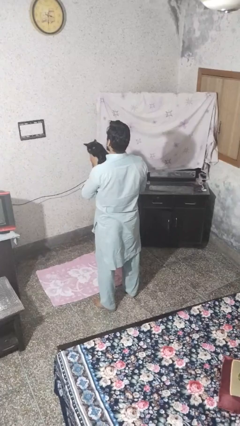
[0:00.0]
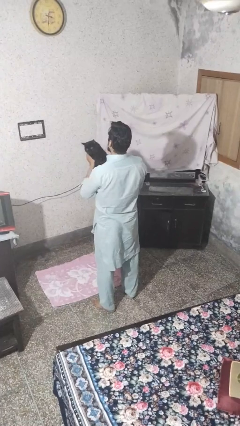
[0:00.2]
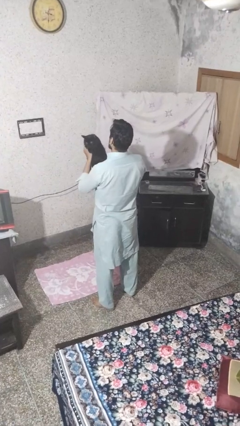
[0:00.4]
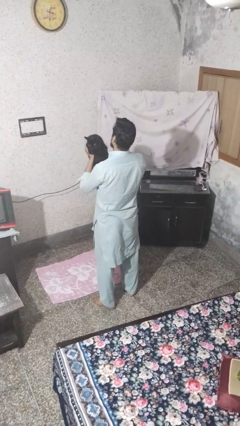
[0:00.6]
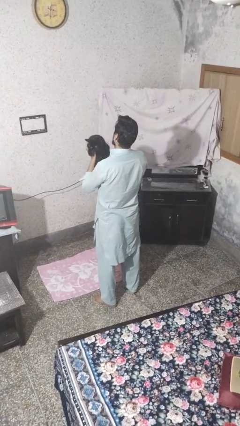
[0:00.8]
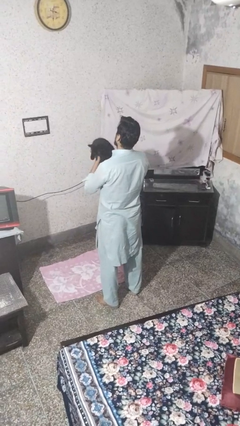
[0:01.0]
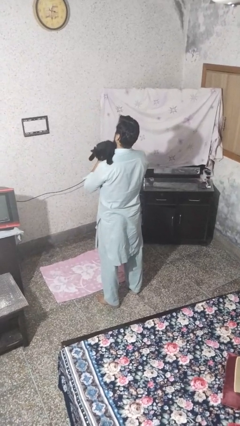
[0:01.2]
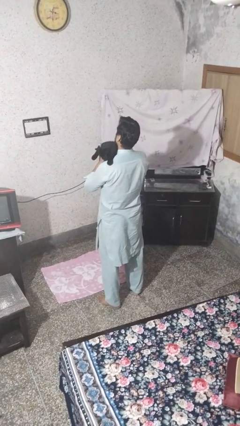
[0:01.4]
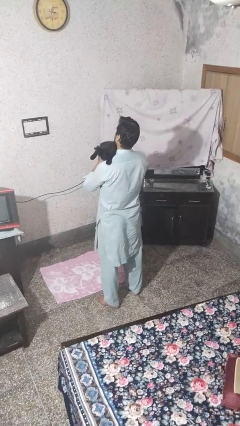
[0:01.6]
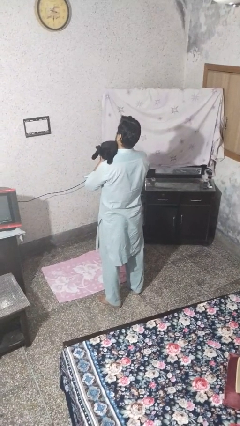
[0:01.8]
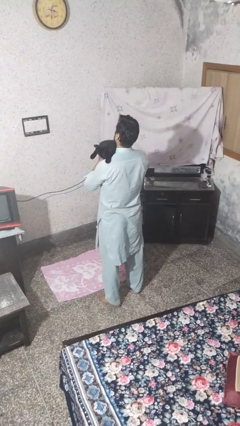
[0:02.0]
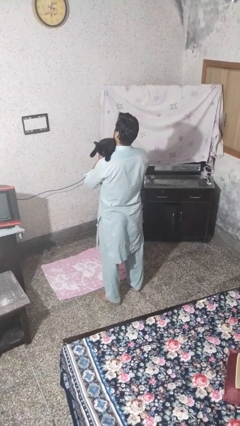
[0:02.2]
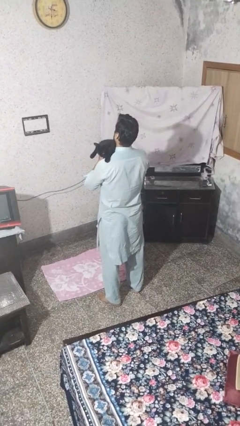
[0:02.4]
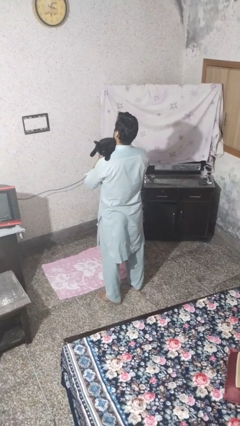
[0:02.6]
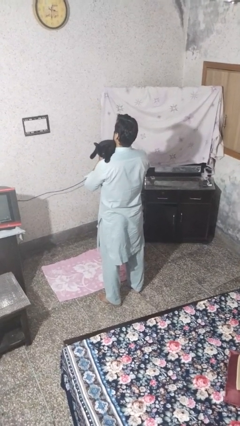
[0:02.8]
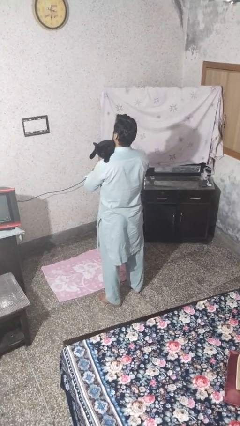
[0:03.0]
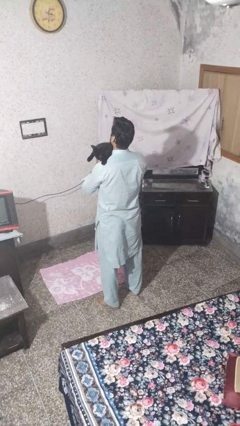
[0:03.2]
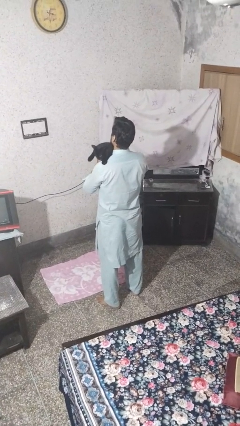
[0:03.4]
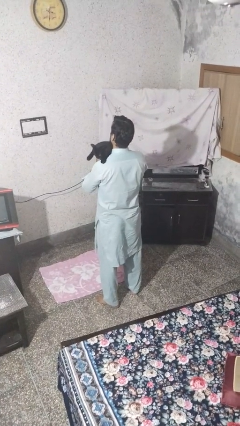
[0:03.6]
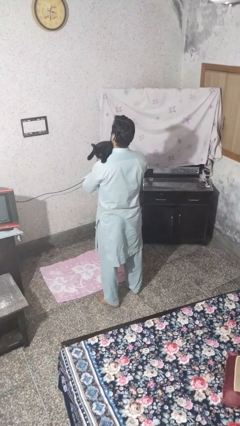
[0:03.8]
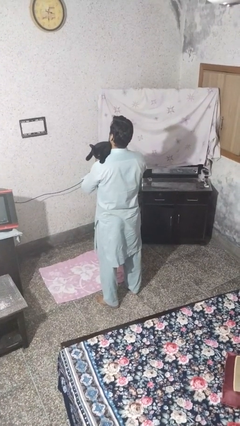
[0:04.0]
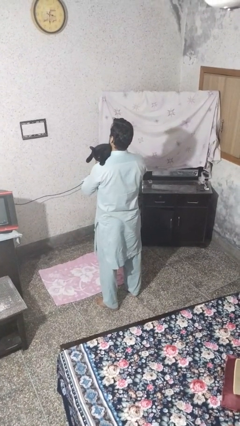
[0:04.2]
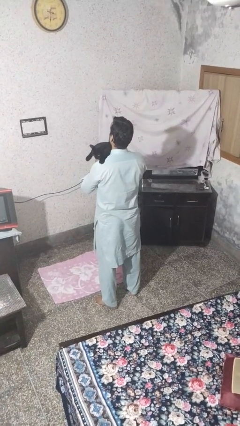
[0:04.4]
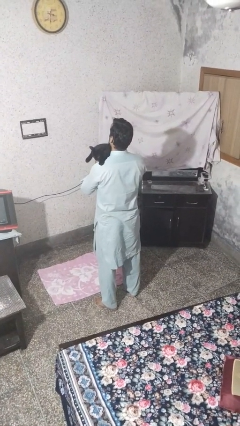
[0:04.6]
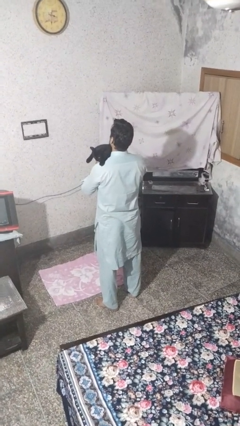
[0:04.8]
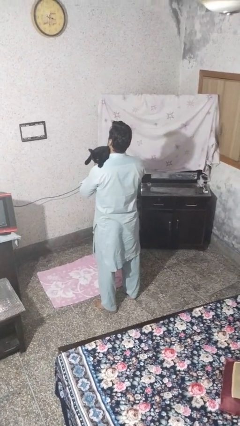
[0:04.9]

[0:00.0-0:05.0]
person hugs cat

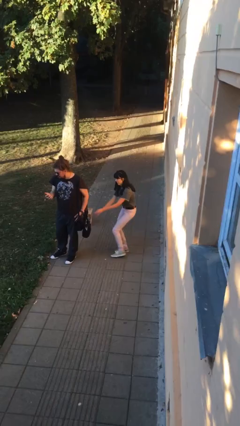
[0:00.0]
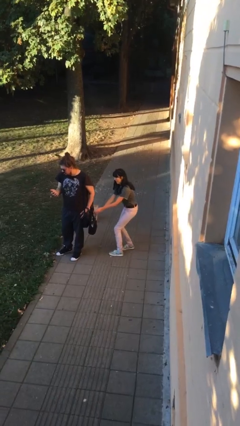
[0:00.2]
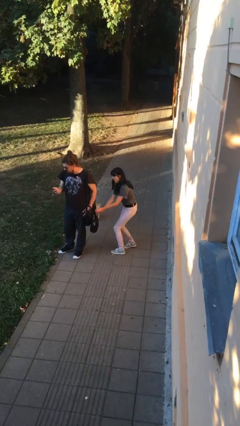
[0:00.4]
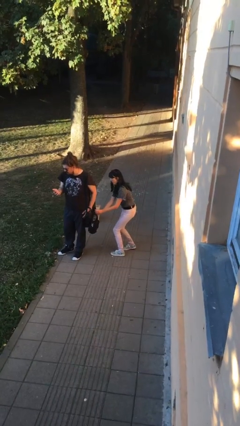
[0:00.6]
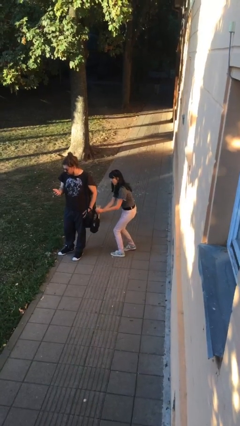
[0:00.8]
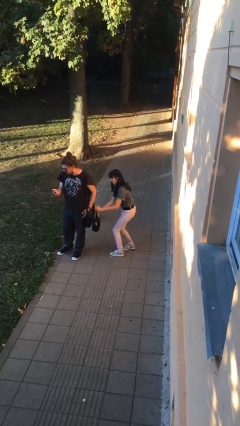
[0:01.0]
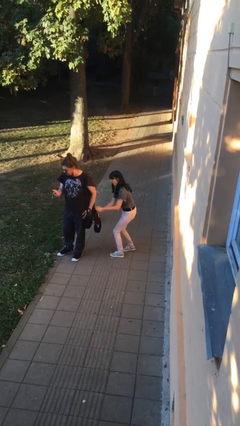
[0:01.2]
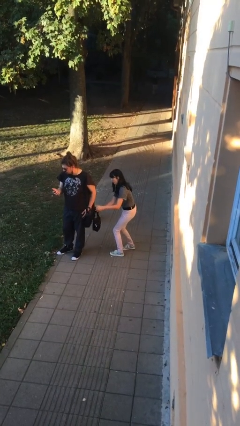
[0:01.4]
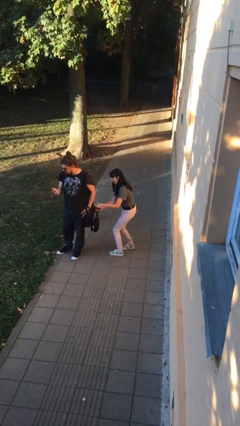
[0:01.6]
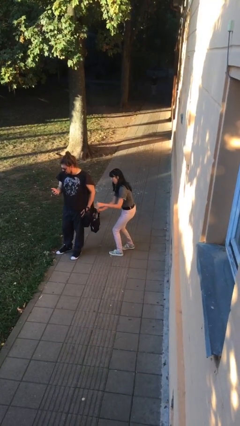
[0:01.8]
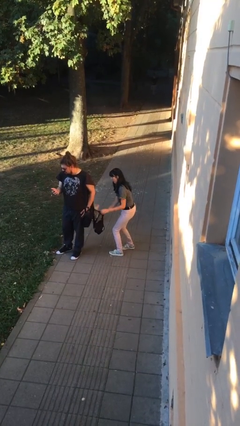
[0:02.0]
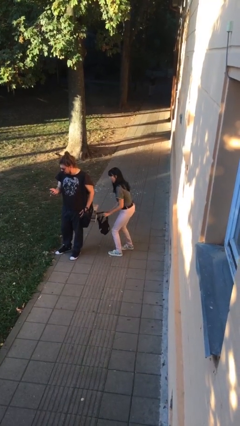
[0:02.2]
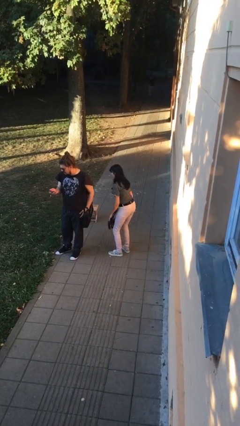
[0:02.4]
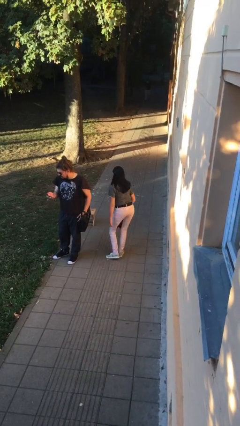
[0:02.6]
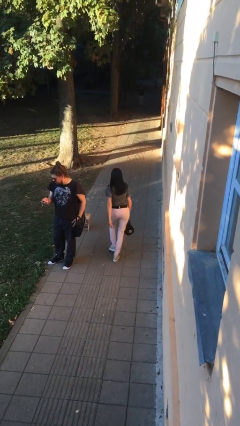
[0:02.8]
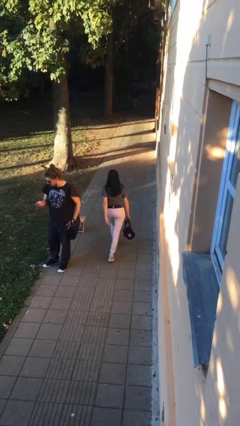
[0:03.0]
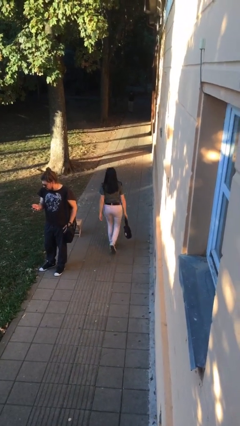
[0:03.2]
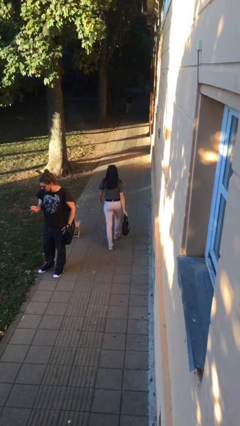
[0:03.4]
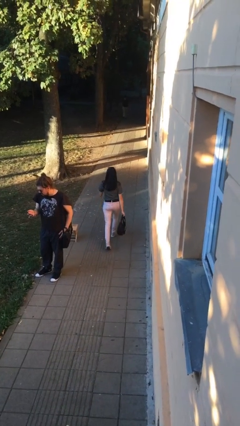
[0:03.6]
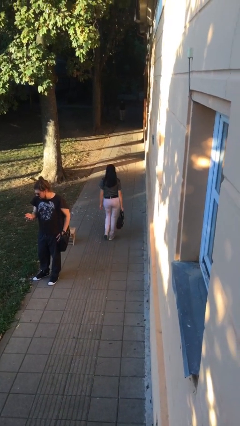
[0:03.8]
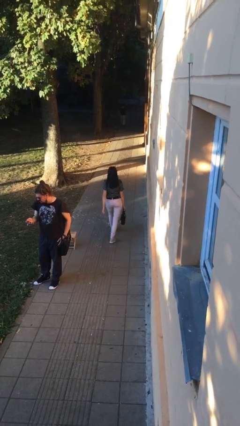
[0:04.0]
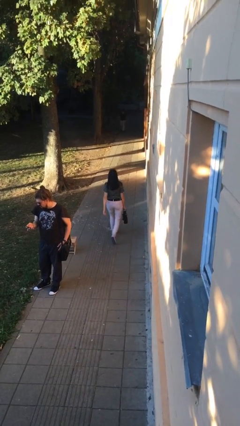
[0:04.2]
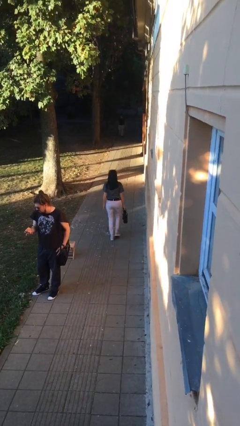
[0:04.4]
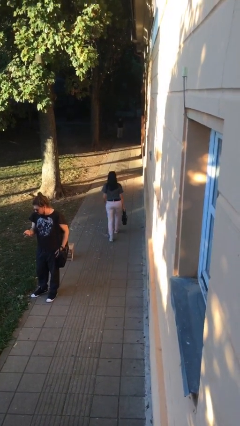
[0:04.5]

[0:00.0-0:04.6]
person steals object from person

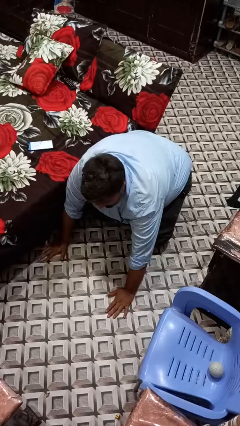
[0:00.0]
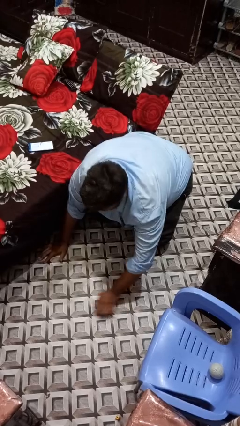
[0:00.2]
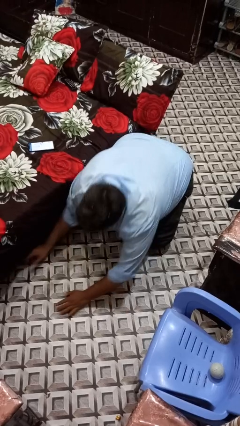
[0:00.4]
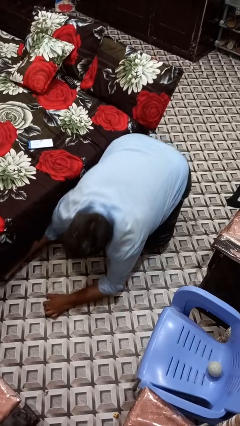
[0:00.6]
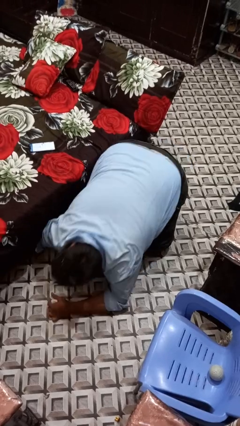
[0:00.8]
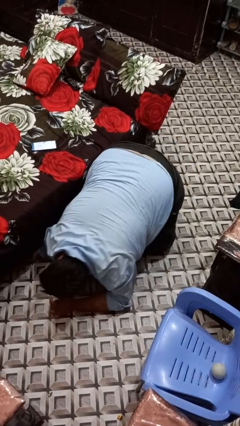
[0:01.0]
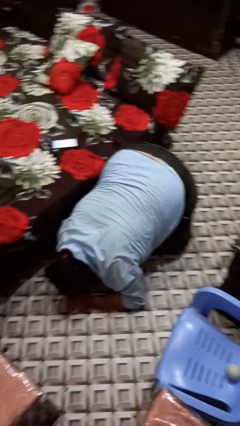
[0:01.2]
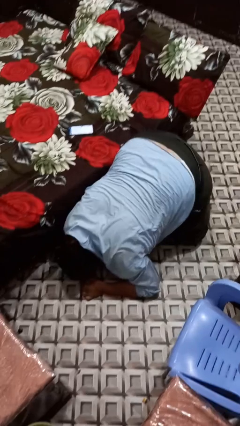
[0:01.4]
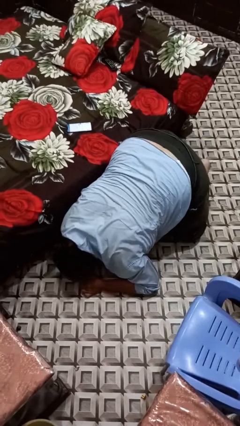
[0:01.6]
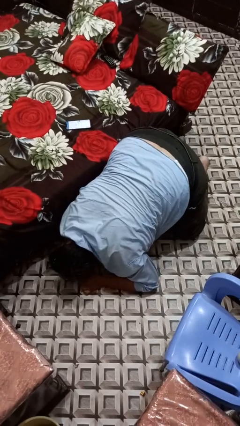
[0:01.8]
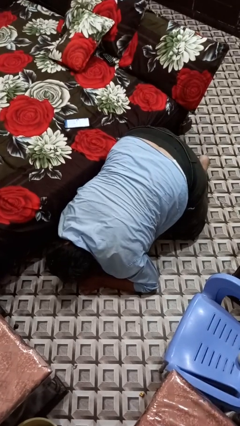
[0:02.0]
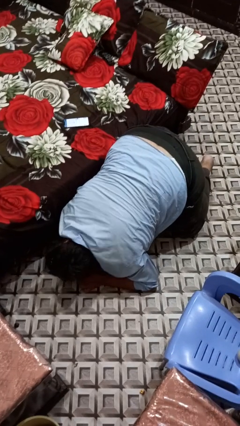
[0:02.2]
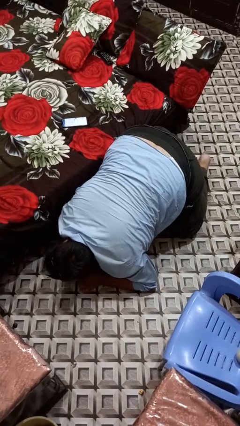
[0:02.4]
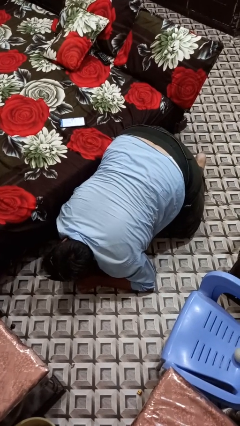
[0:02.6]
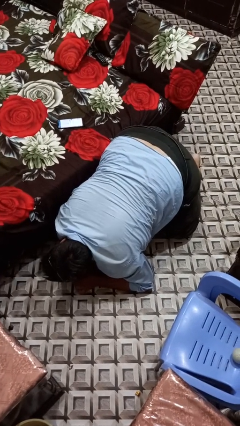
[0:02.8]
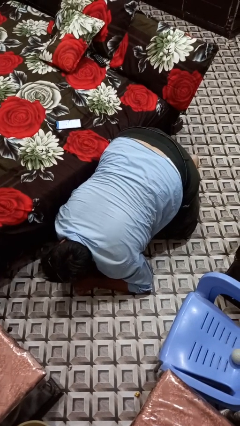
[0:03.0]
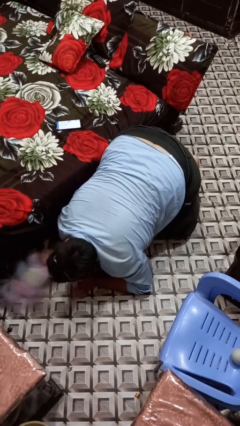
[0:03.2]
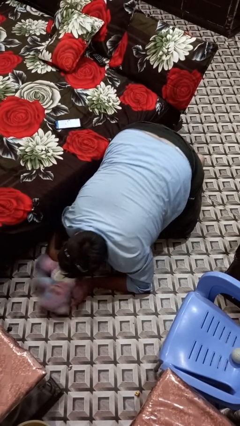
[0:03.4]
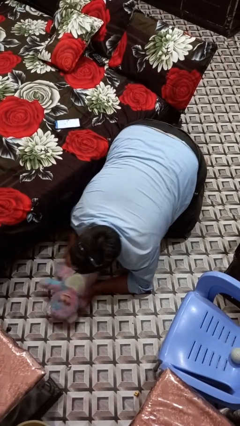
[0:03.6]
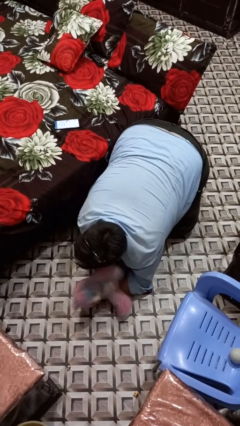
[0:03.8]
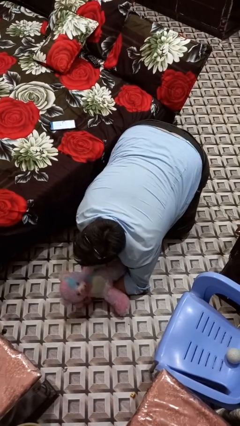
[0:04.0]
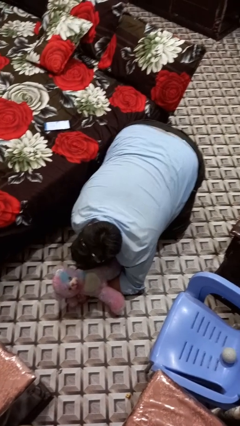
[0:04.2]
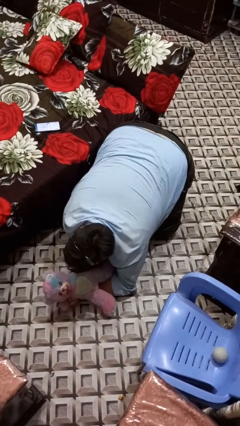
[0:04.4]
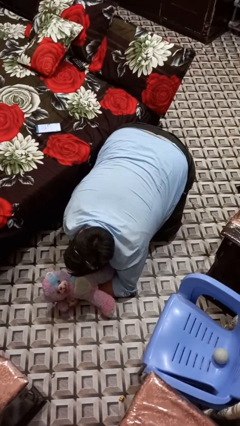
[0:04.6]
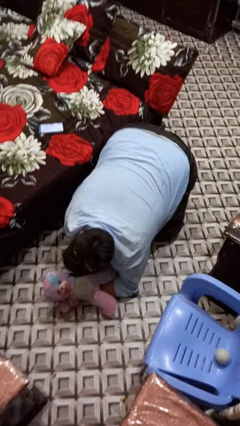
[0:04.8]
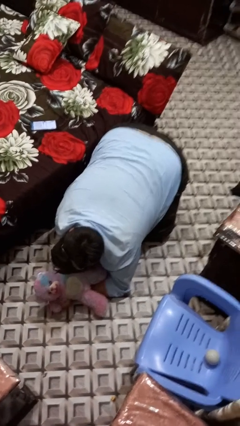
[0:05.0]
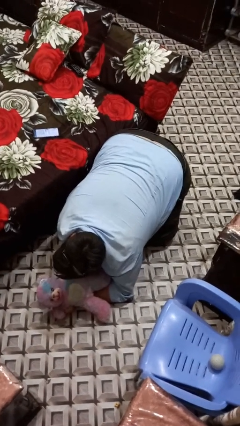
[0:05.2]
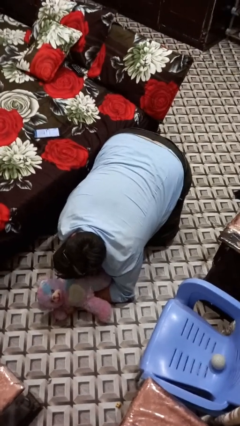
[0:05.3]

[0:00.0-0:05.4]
person searches under bed

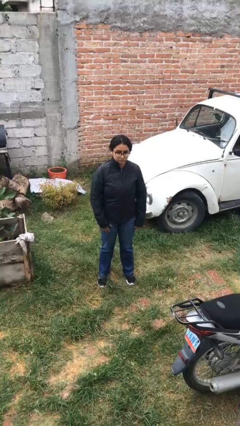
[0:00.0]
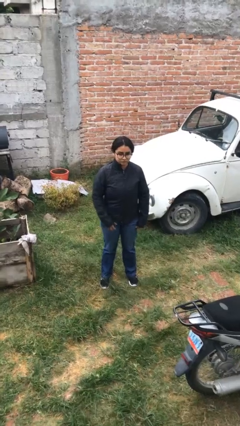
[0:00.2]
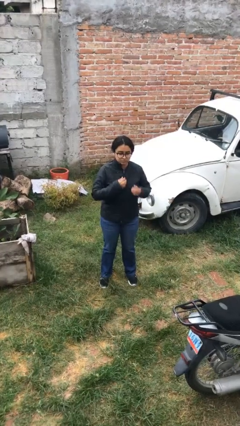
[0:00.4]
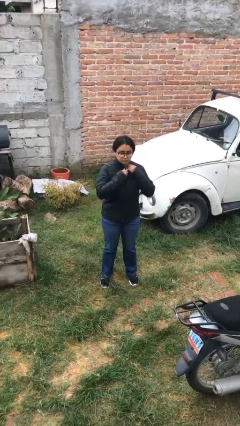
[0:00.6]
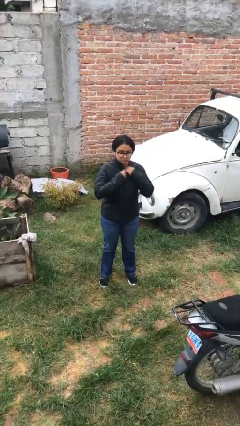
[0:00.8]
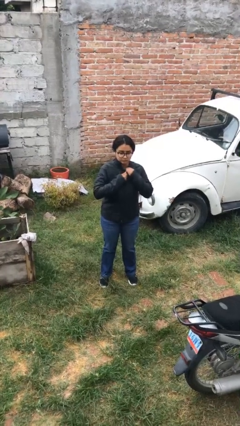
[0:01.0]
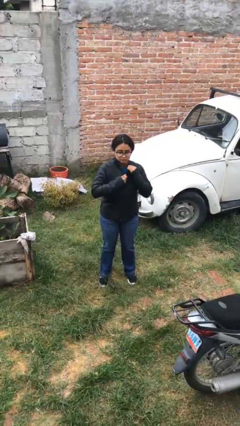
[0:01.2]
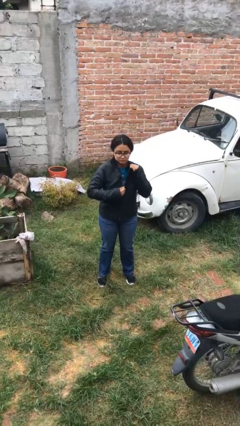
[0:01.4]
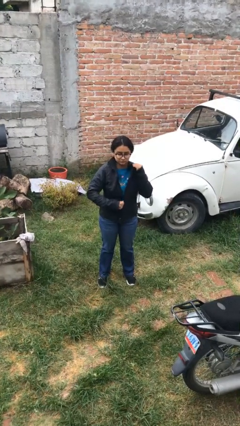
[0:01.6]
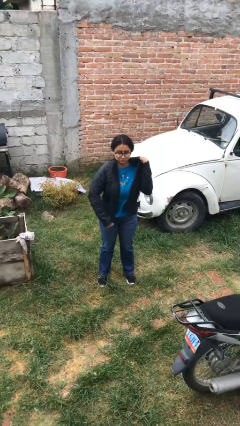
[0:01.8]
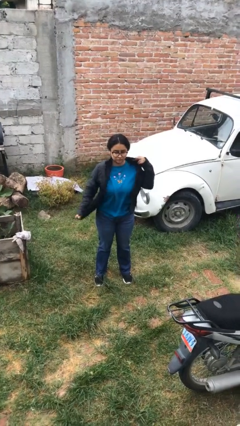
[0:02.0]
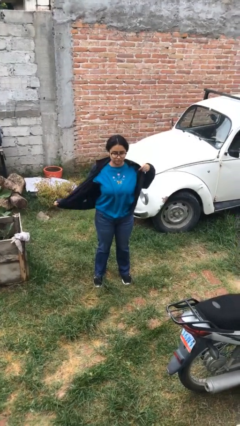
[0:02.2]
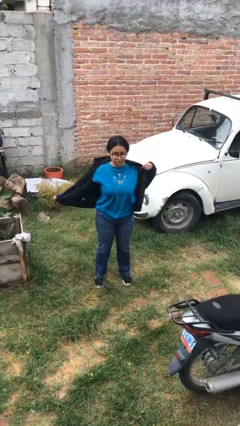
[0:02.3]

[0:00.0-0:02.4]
person unzips jacket

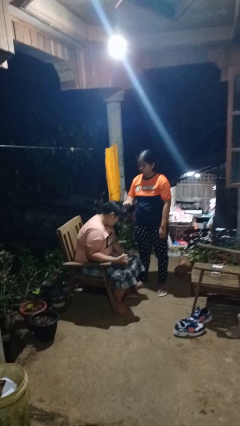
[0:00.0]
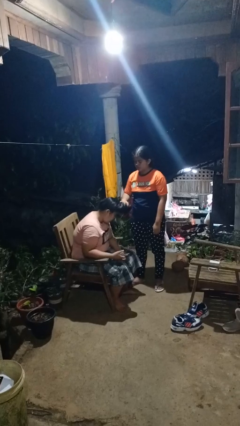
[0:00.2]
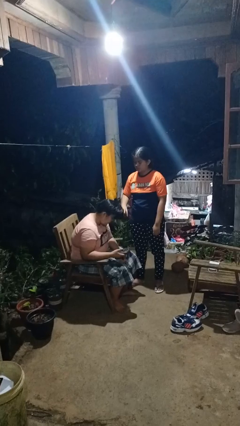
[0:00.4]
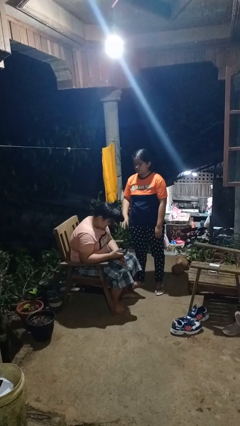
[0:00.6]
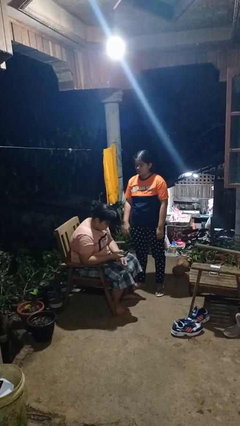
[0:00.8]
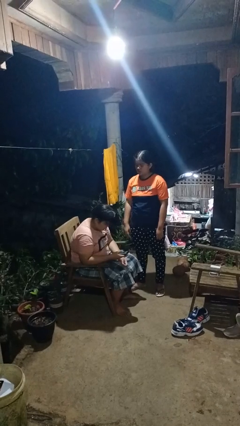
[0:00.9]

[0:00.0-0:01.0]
person grabs person by hair
